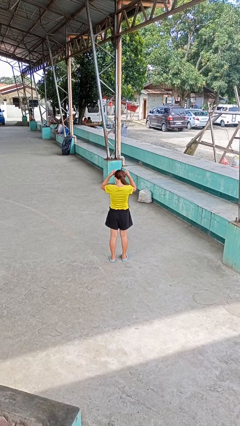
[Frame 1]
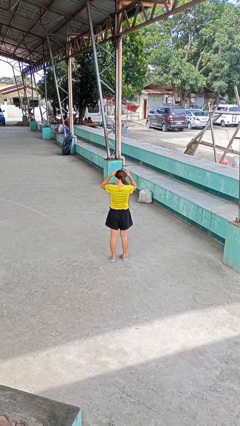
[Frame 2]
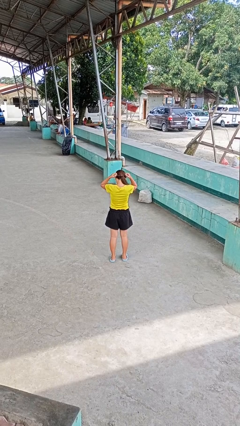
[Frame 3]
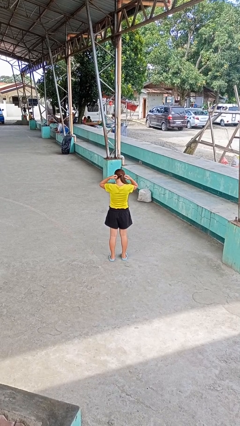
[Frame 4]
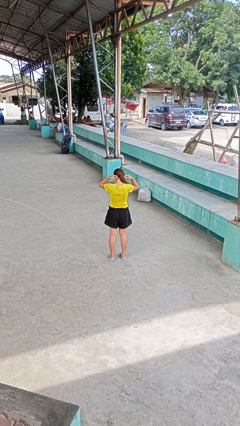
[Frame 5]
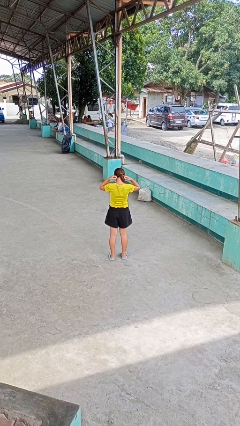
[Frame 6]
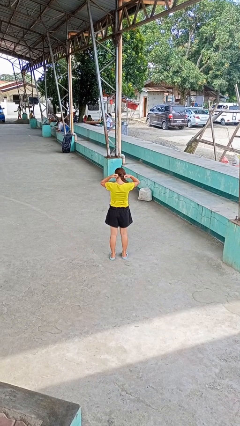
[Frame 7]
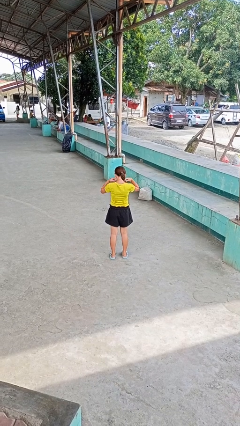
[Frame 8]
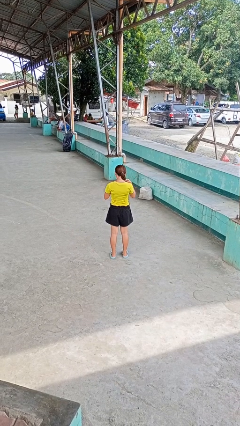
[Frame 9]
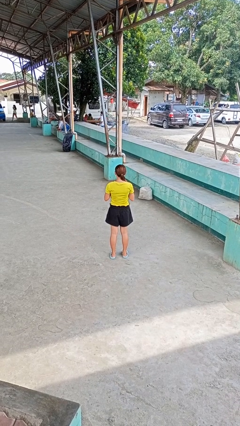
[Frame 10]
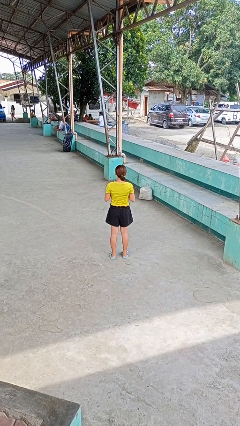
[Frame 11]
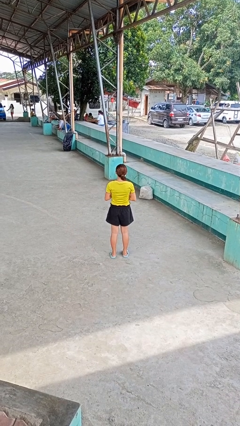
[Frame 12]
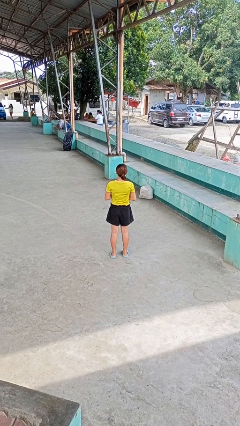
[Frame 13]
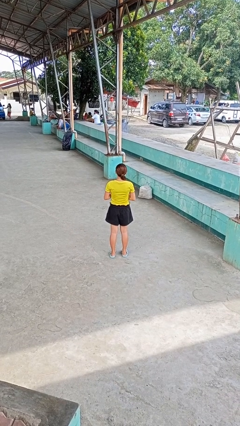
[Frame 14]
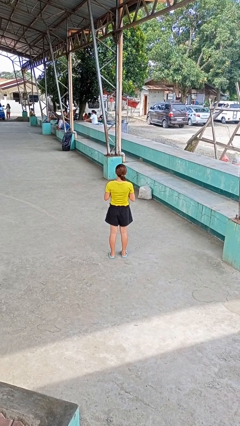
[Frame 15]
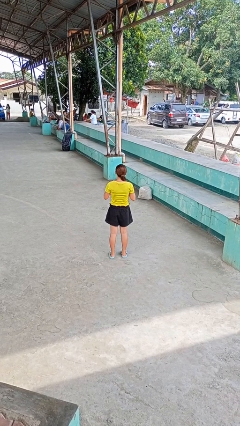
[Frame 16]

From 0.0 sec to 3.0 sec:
person puts on necklace

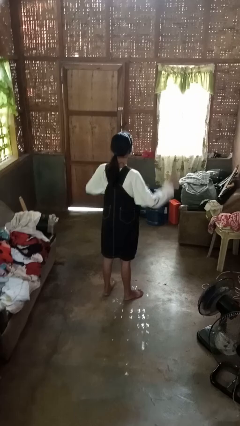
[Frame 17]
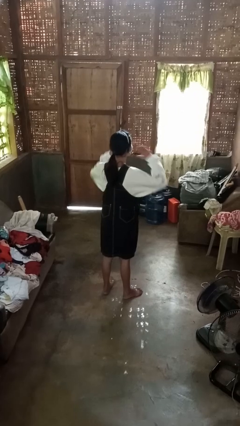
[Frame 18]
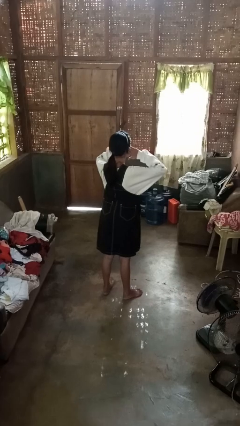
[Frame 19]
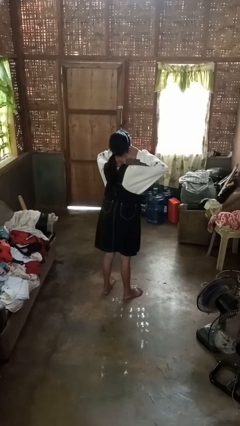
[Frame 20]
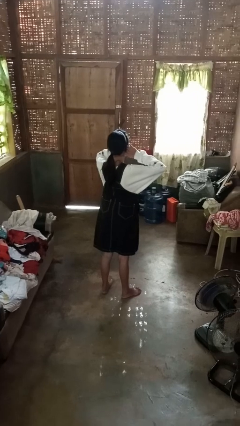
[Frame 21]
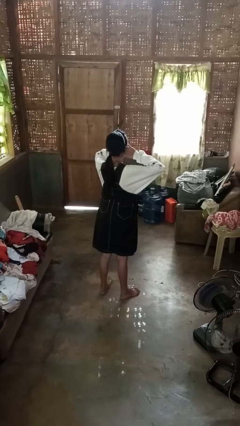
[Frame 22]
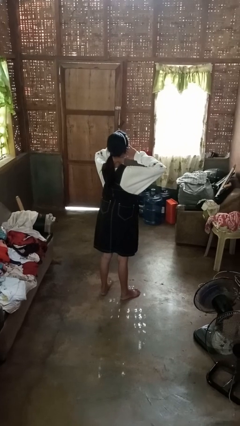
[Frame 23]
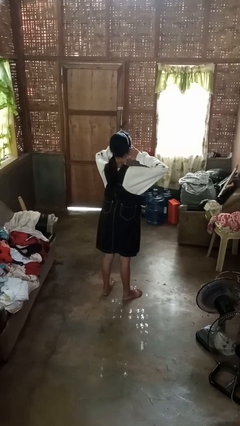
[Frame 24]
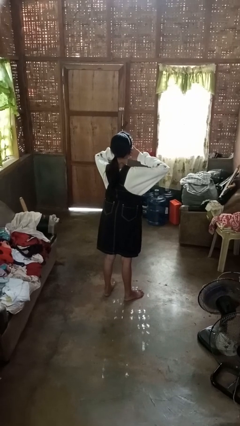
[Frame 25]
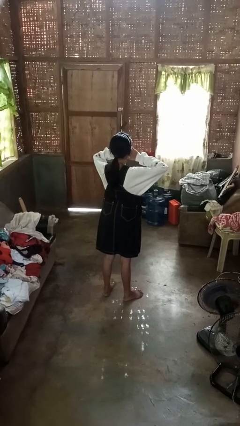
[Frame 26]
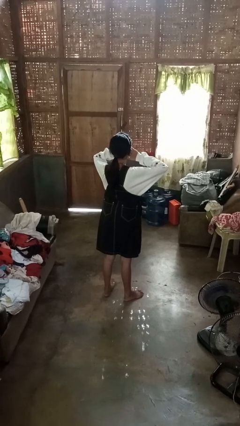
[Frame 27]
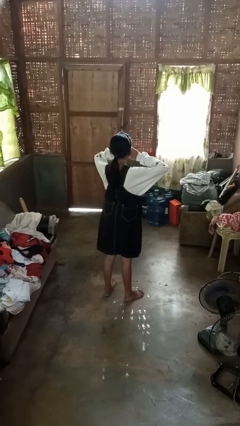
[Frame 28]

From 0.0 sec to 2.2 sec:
person puts fingers in ear

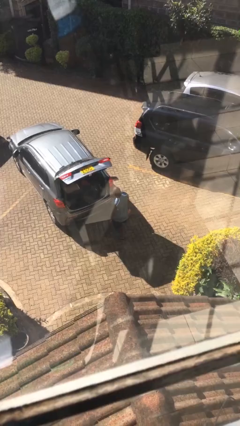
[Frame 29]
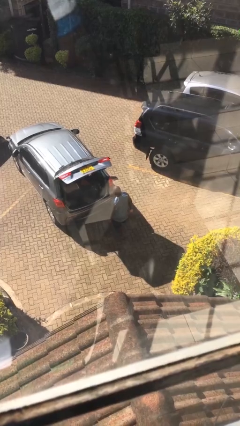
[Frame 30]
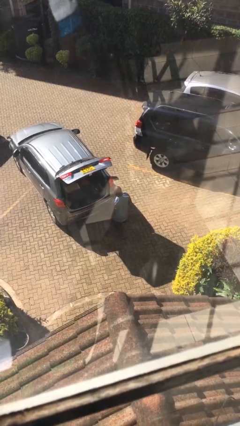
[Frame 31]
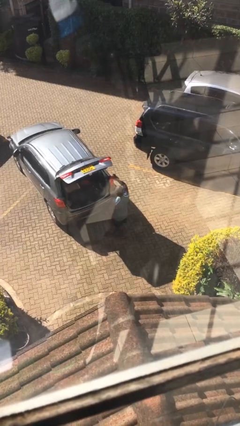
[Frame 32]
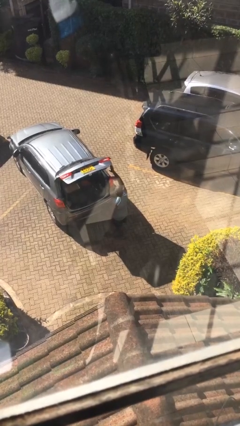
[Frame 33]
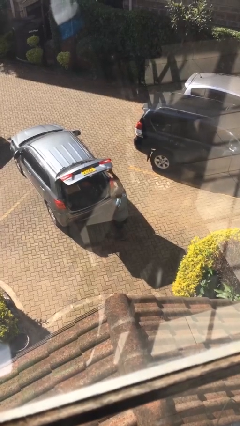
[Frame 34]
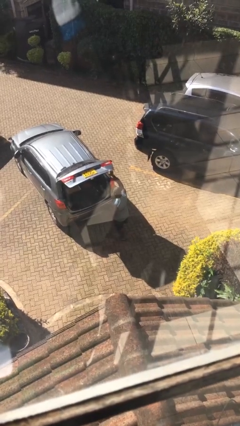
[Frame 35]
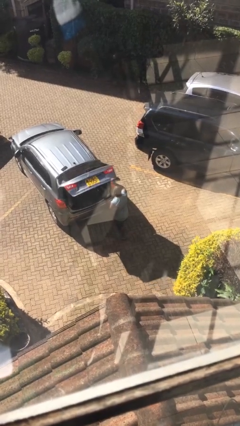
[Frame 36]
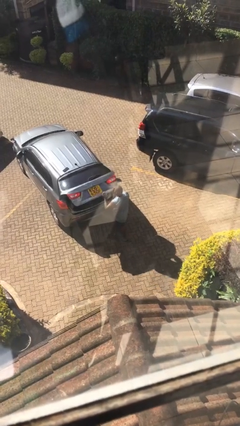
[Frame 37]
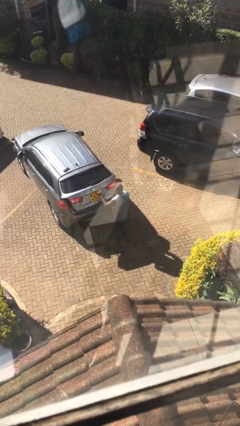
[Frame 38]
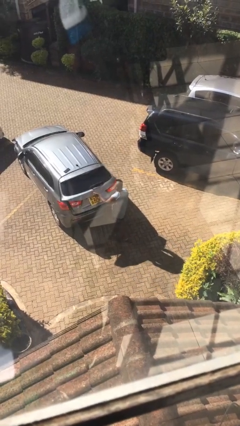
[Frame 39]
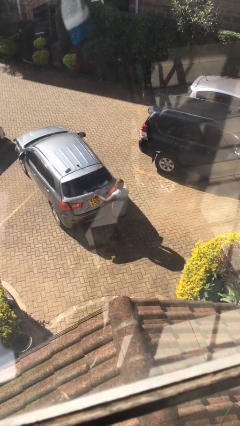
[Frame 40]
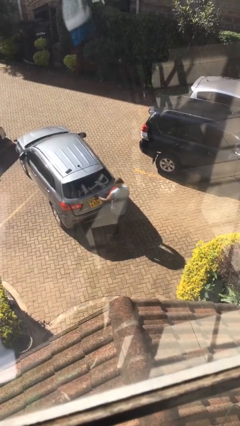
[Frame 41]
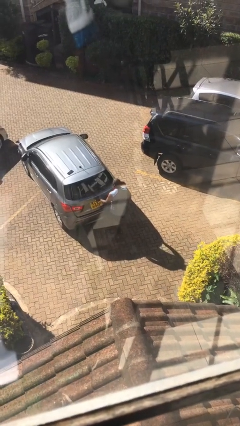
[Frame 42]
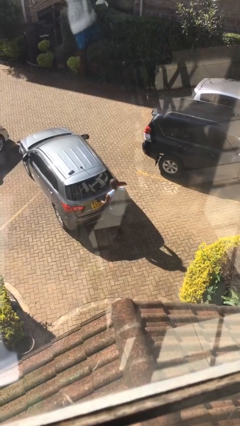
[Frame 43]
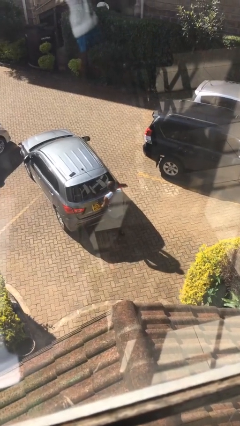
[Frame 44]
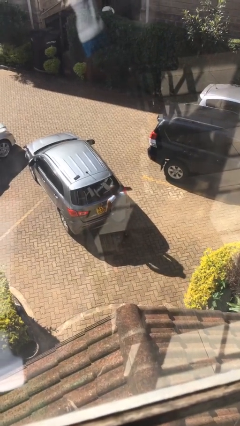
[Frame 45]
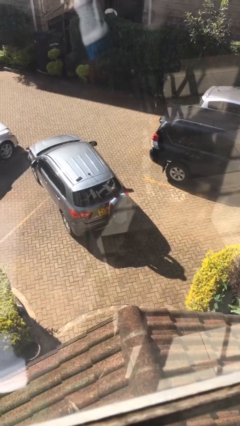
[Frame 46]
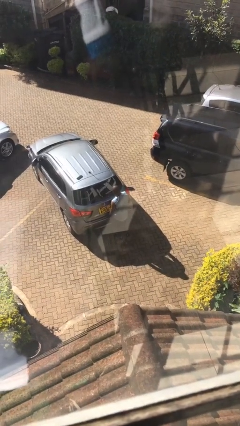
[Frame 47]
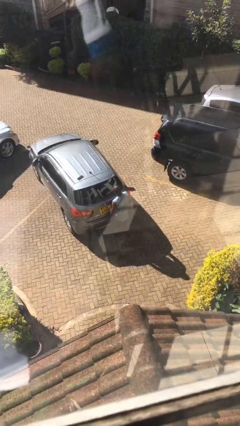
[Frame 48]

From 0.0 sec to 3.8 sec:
person closes car trunk

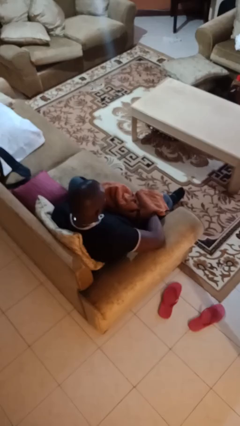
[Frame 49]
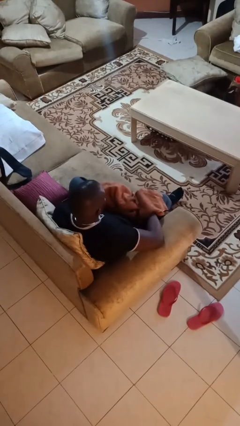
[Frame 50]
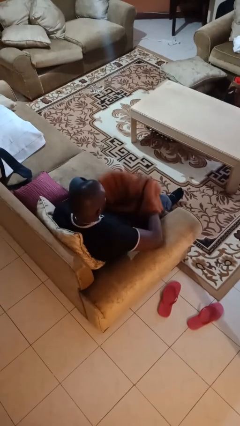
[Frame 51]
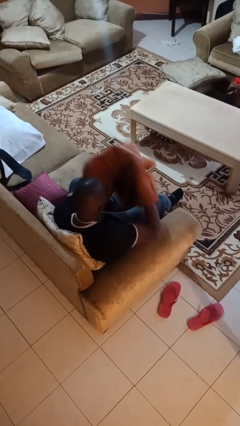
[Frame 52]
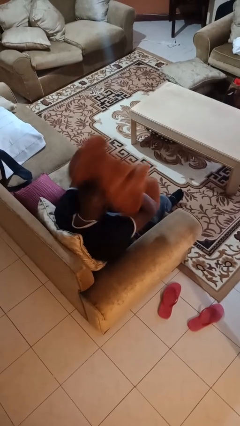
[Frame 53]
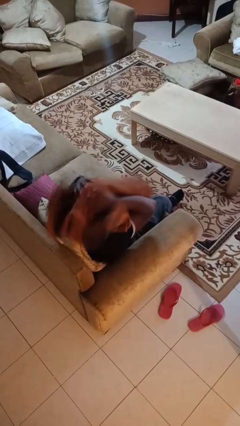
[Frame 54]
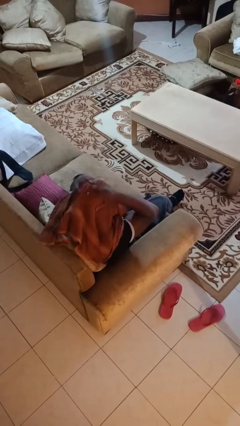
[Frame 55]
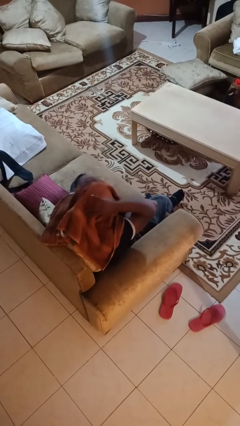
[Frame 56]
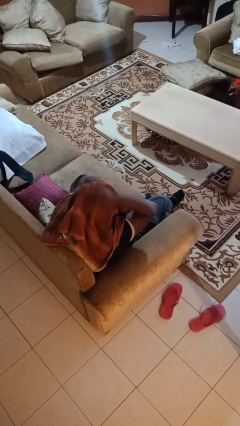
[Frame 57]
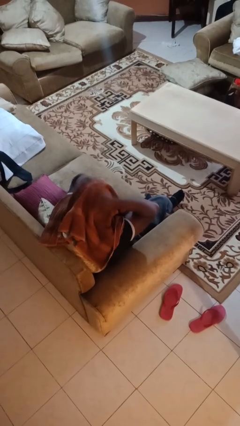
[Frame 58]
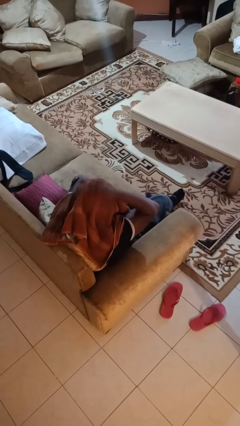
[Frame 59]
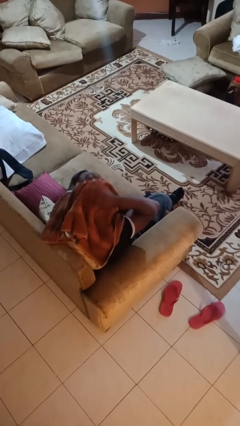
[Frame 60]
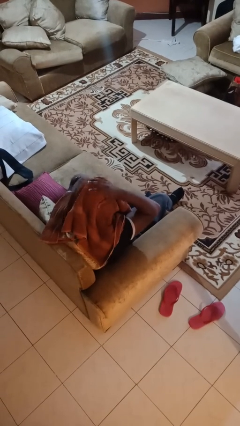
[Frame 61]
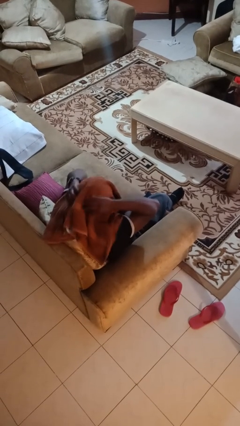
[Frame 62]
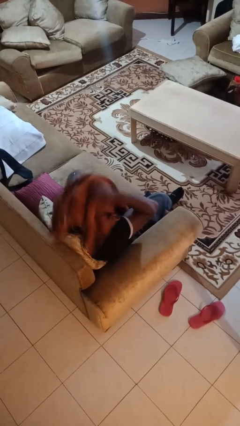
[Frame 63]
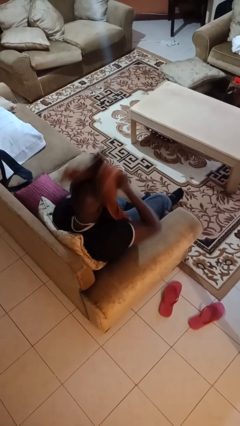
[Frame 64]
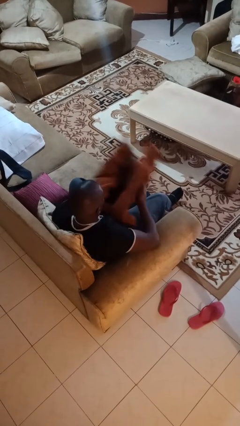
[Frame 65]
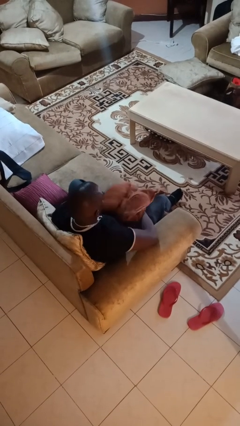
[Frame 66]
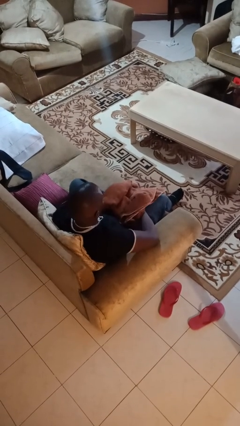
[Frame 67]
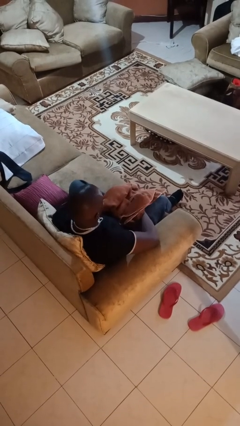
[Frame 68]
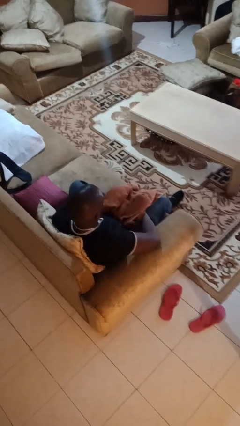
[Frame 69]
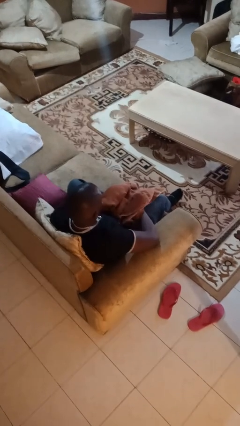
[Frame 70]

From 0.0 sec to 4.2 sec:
person dries hair with towel

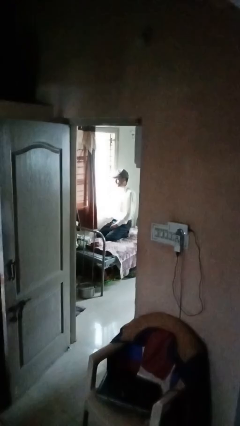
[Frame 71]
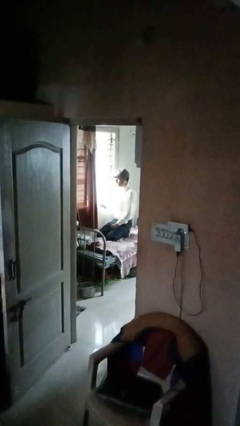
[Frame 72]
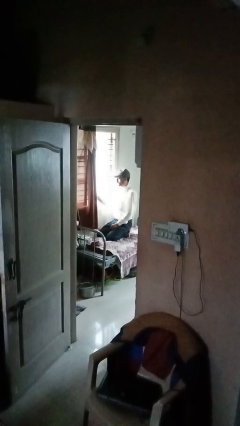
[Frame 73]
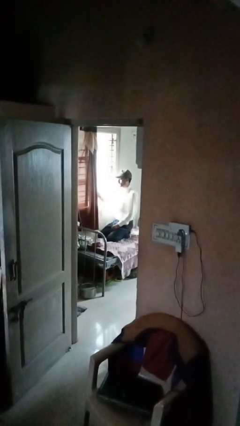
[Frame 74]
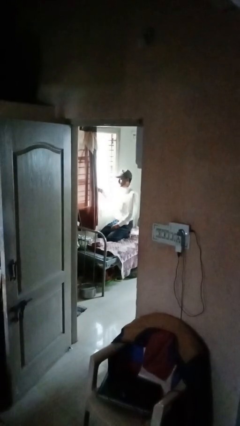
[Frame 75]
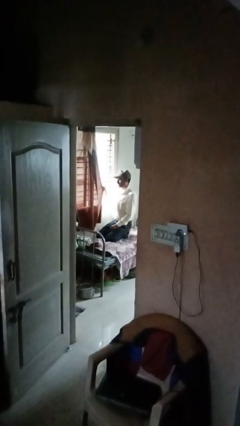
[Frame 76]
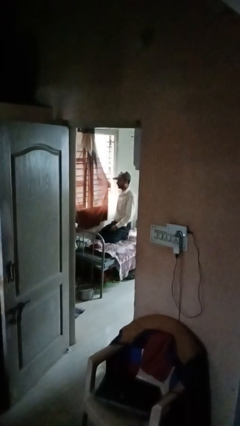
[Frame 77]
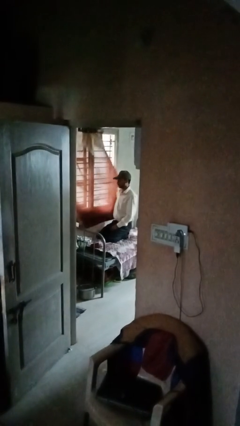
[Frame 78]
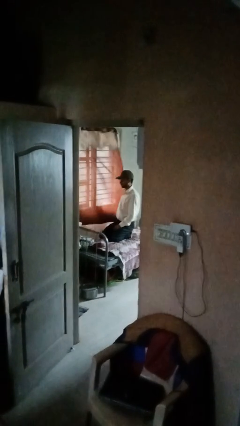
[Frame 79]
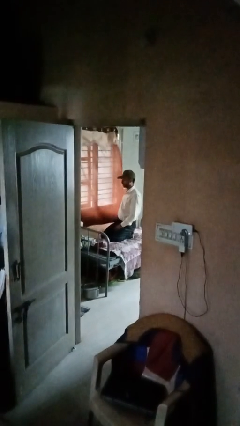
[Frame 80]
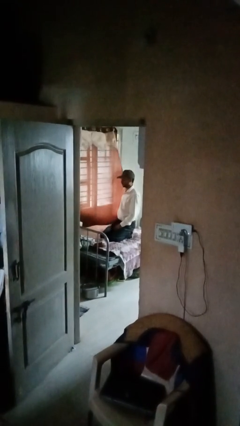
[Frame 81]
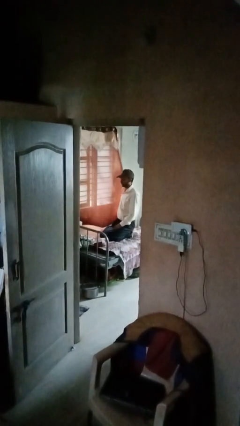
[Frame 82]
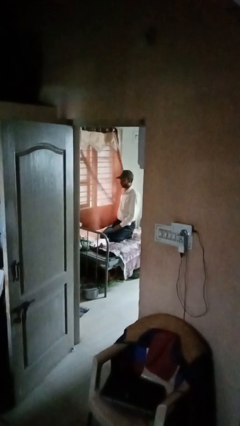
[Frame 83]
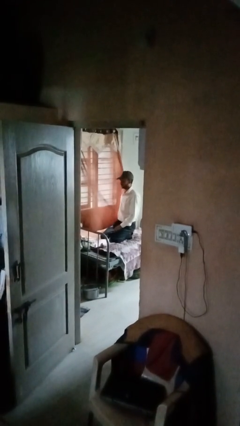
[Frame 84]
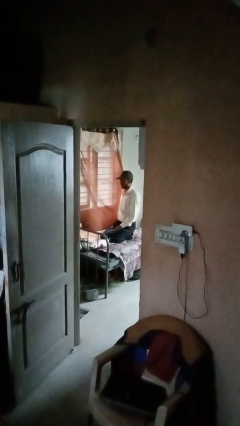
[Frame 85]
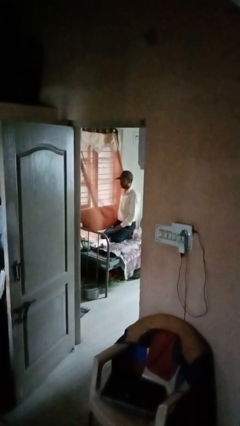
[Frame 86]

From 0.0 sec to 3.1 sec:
person closes curtains

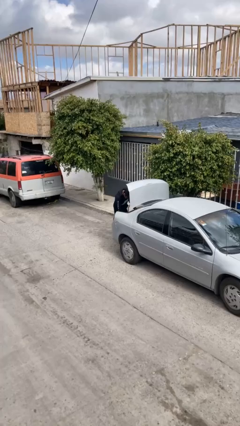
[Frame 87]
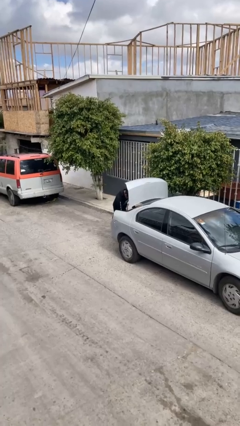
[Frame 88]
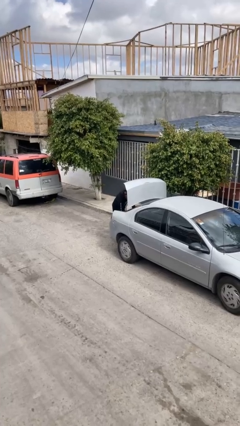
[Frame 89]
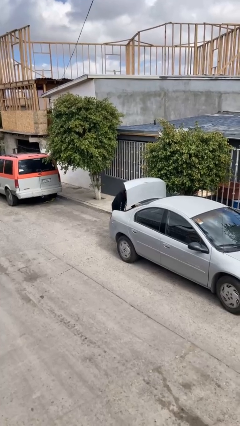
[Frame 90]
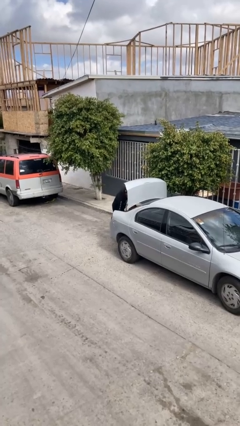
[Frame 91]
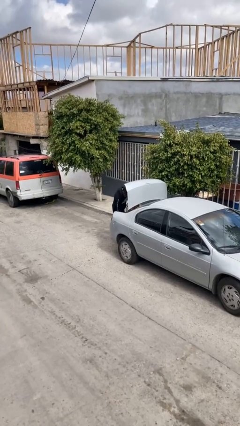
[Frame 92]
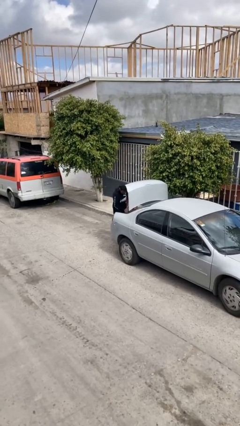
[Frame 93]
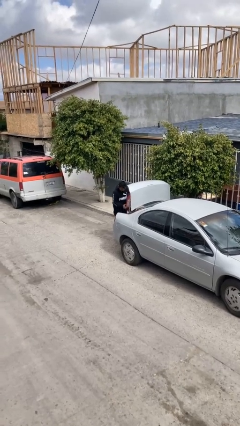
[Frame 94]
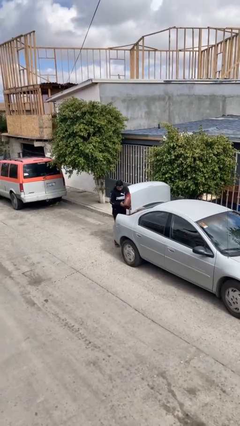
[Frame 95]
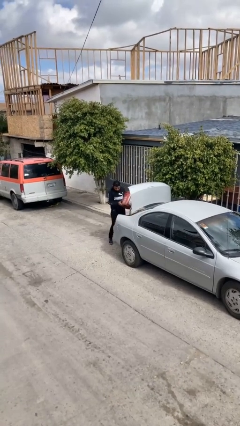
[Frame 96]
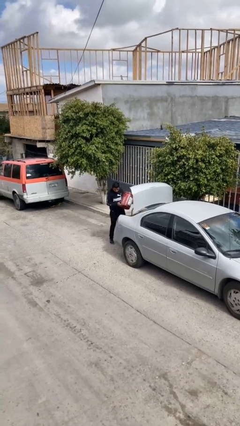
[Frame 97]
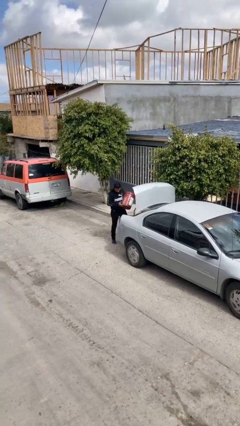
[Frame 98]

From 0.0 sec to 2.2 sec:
person unloads car
